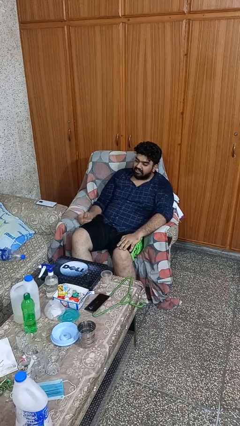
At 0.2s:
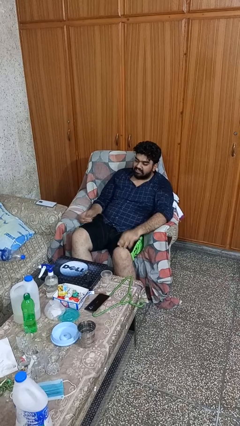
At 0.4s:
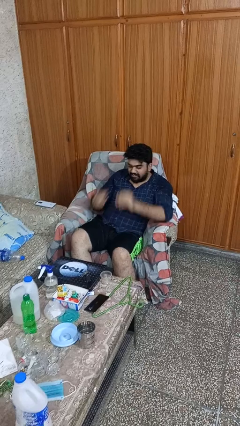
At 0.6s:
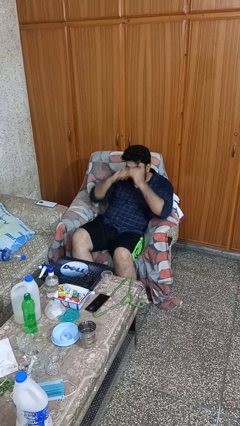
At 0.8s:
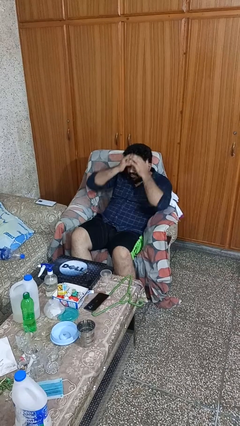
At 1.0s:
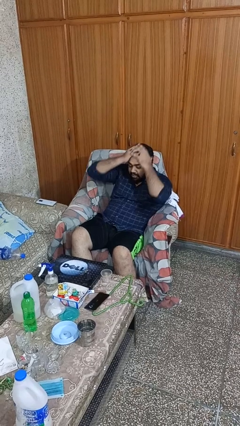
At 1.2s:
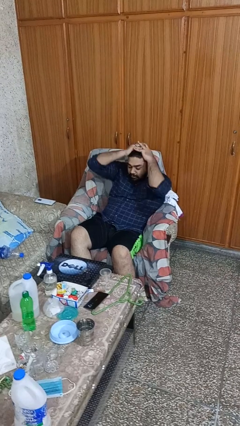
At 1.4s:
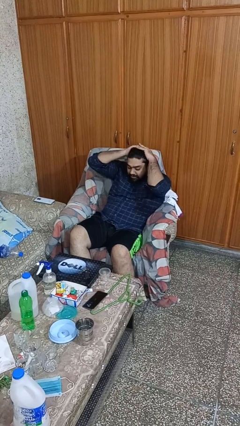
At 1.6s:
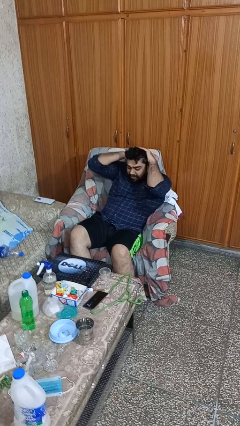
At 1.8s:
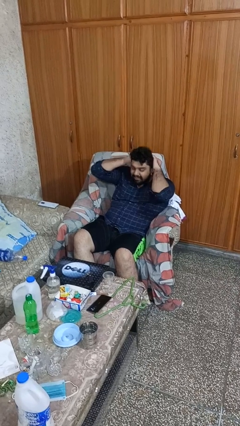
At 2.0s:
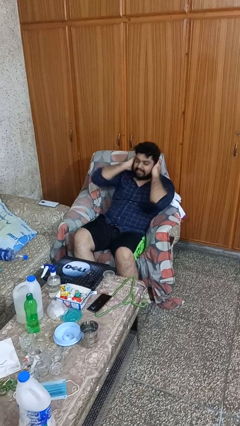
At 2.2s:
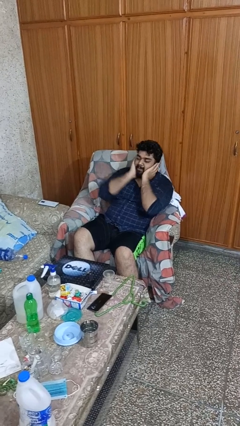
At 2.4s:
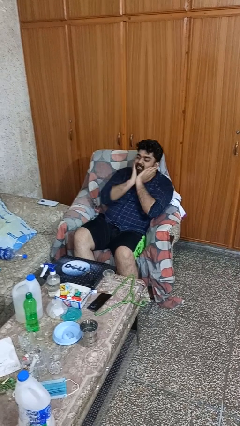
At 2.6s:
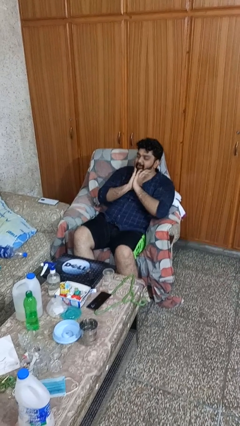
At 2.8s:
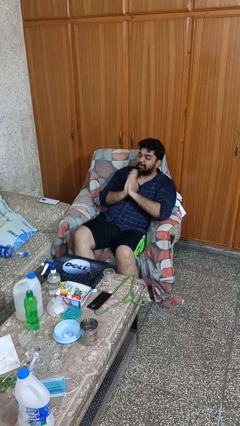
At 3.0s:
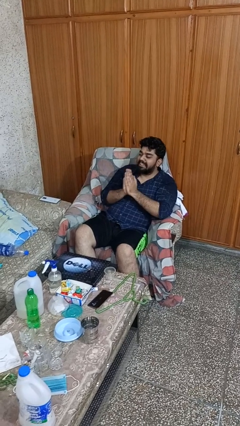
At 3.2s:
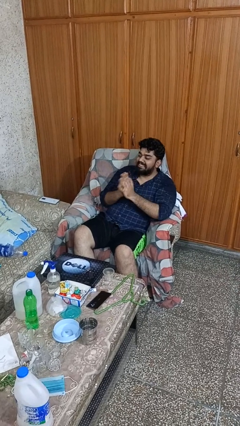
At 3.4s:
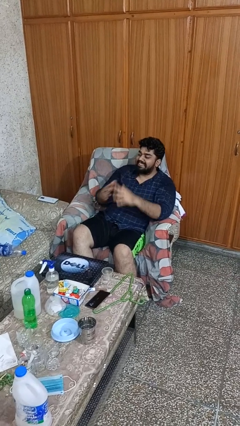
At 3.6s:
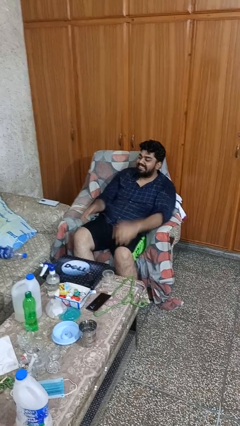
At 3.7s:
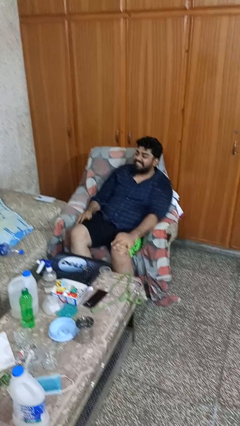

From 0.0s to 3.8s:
person scratches face

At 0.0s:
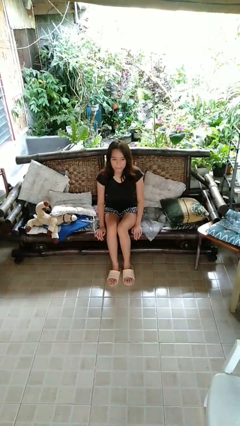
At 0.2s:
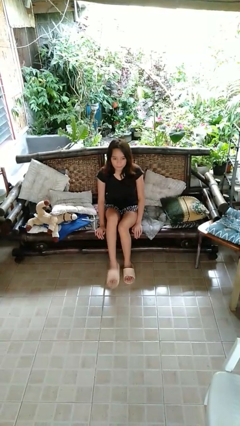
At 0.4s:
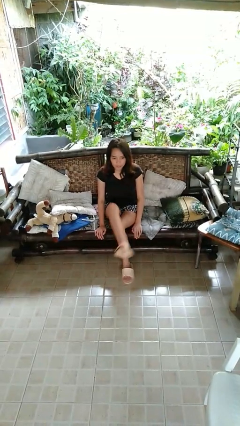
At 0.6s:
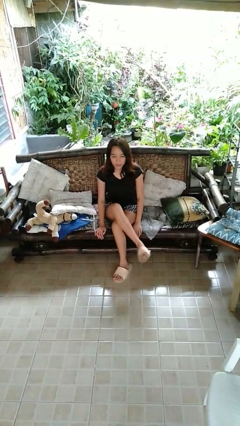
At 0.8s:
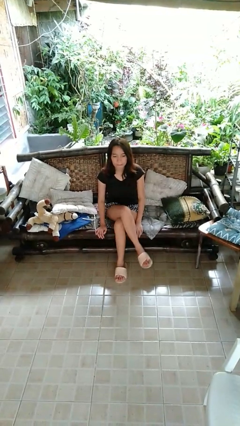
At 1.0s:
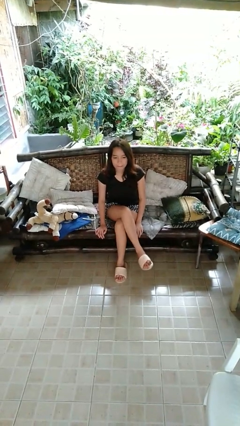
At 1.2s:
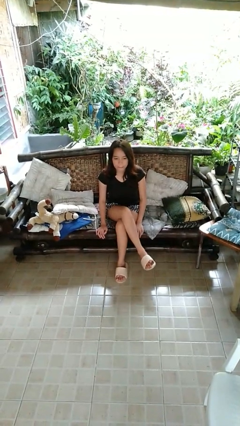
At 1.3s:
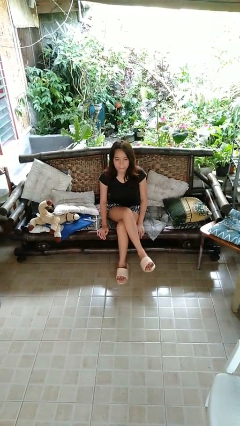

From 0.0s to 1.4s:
person crosses legs

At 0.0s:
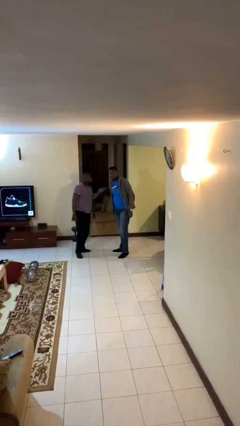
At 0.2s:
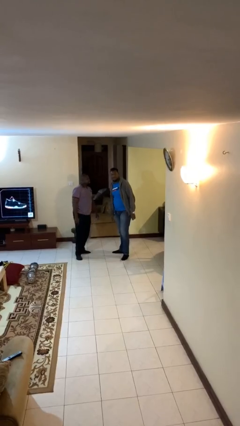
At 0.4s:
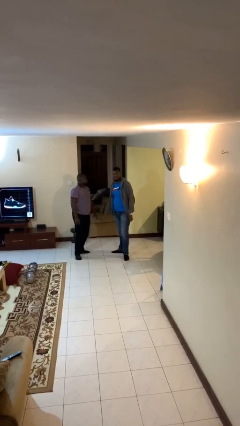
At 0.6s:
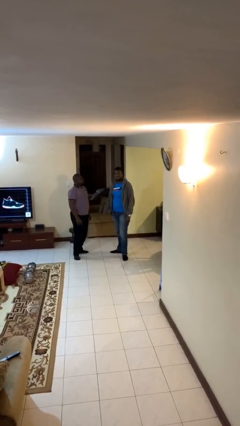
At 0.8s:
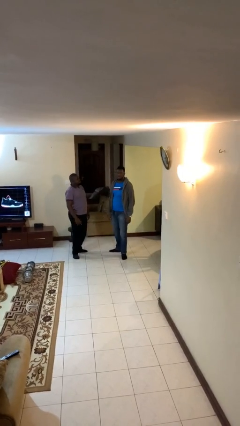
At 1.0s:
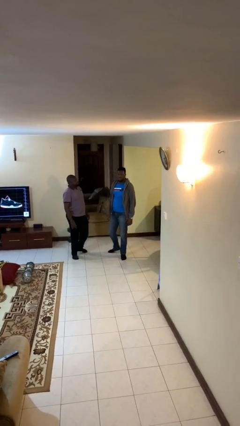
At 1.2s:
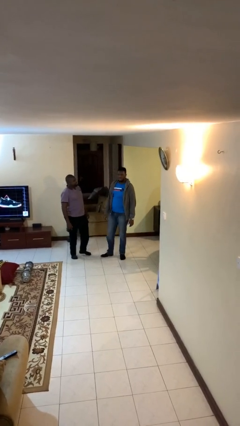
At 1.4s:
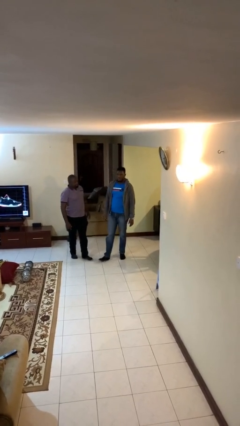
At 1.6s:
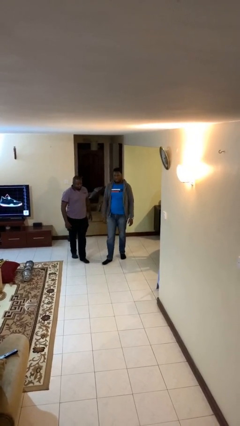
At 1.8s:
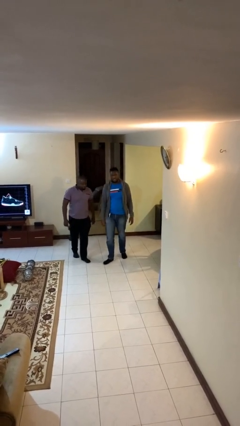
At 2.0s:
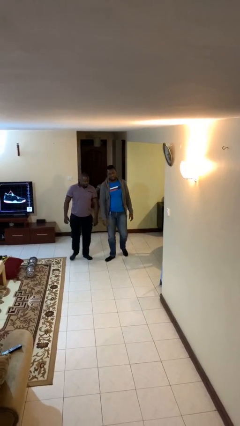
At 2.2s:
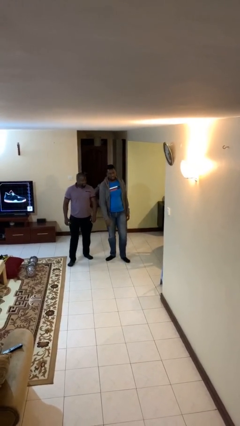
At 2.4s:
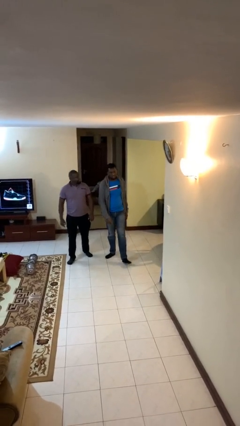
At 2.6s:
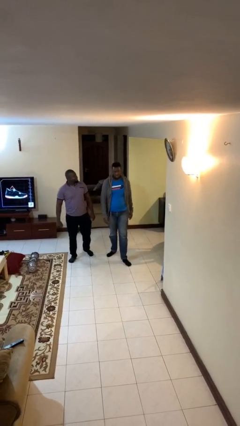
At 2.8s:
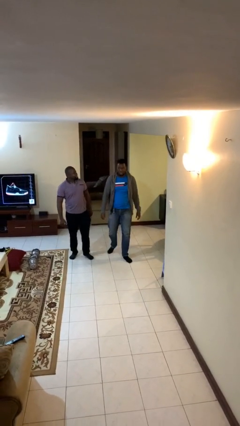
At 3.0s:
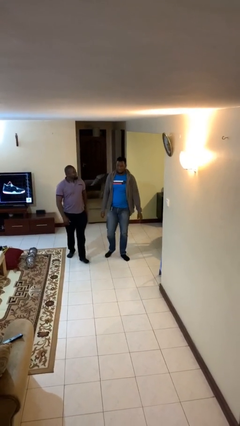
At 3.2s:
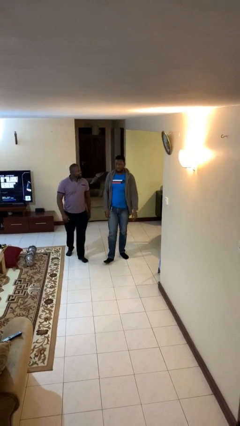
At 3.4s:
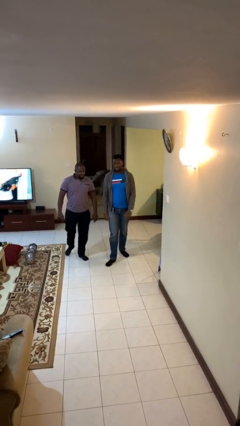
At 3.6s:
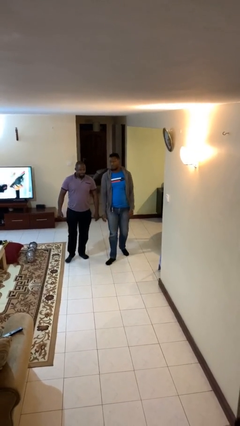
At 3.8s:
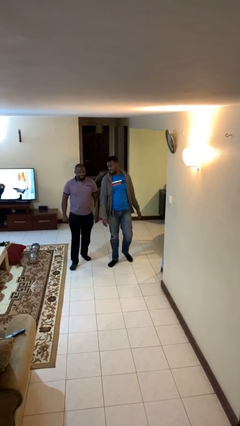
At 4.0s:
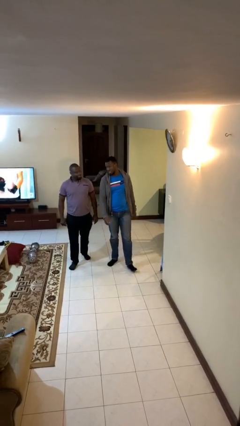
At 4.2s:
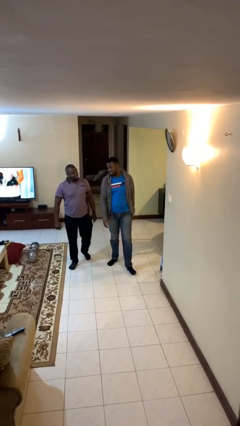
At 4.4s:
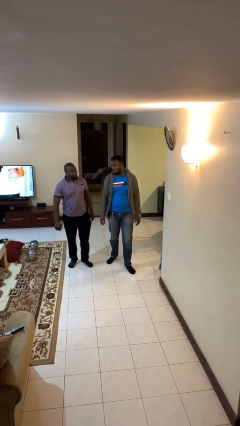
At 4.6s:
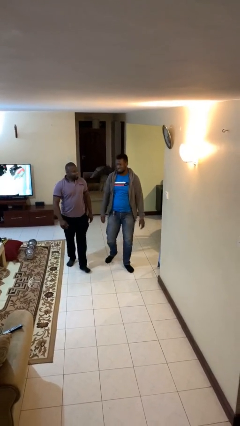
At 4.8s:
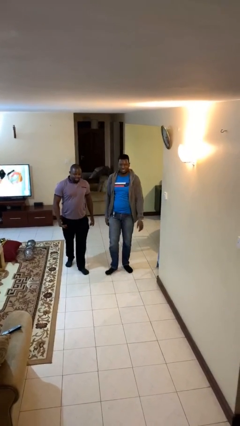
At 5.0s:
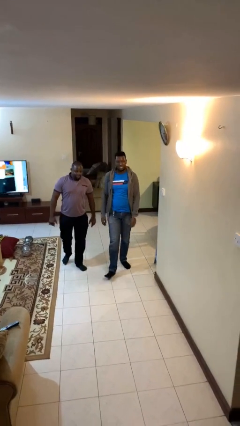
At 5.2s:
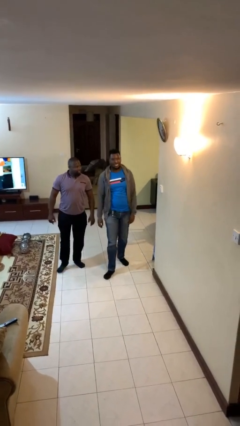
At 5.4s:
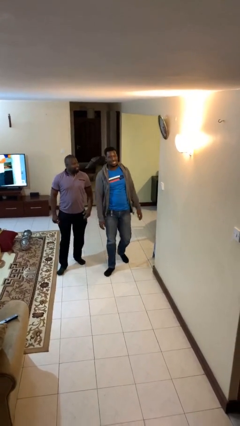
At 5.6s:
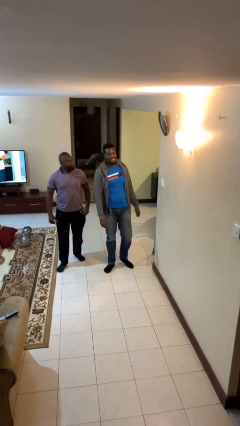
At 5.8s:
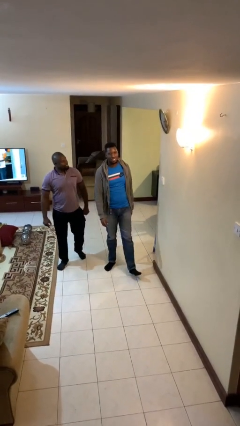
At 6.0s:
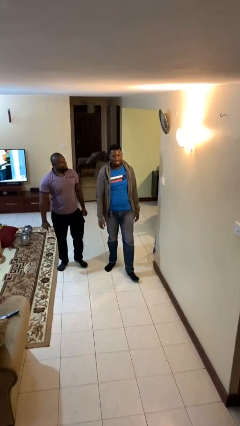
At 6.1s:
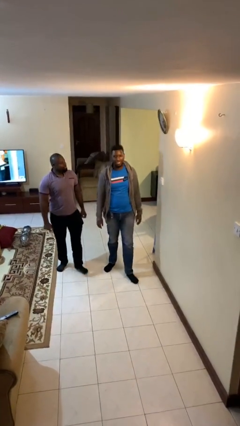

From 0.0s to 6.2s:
person talks to person

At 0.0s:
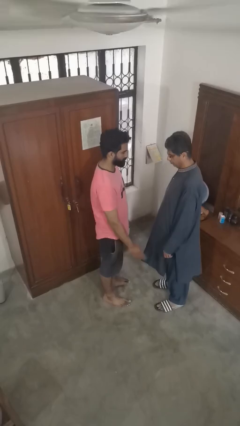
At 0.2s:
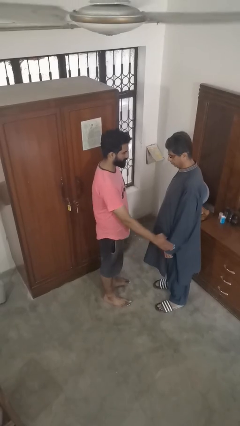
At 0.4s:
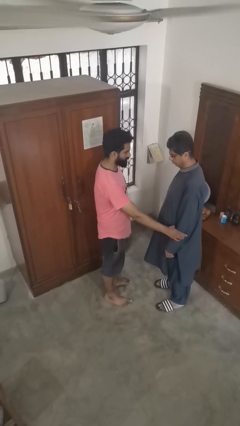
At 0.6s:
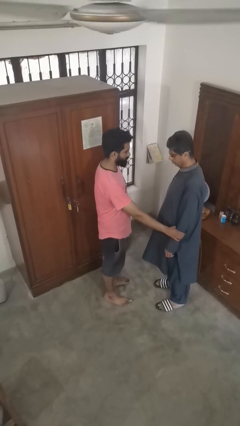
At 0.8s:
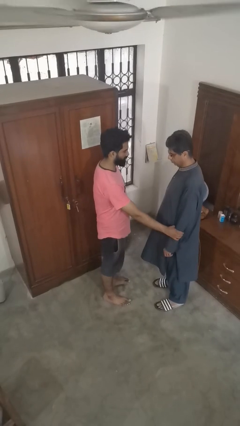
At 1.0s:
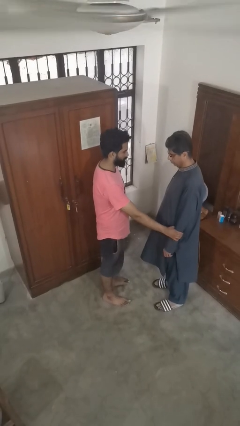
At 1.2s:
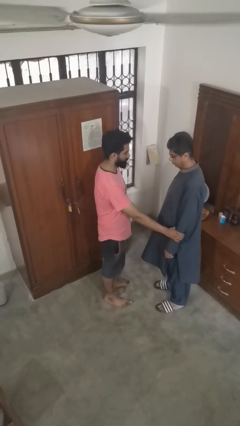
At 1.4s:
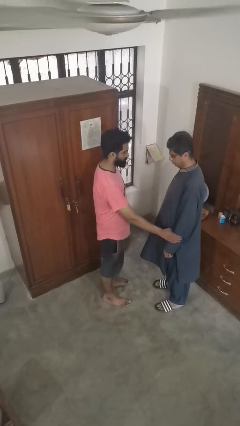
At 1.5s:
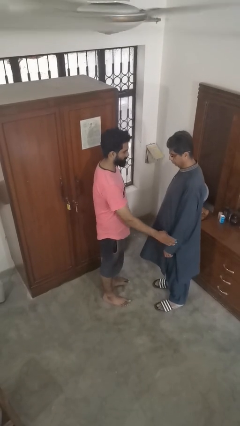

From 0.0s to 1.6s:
person grabs person by forearm

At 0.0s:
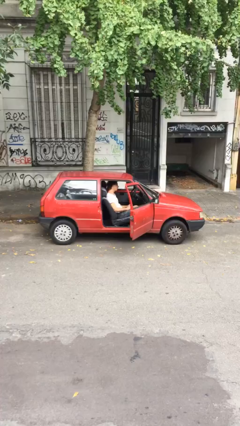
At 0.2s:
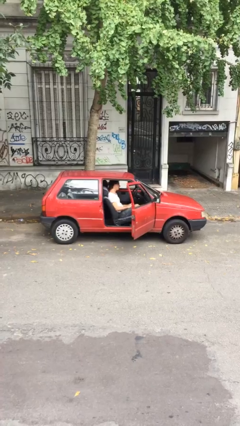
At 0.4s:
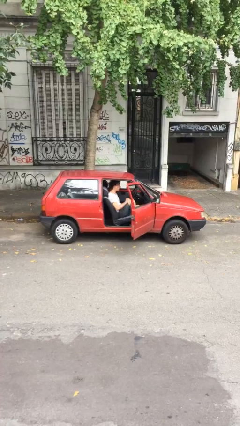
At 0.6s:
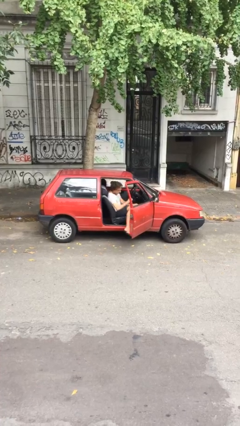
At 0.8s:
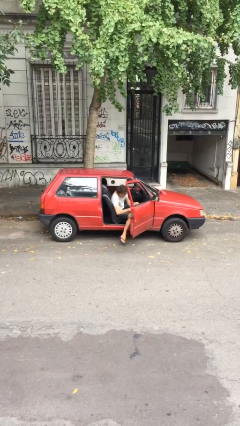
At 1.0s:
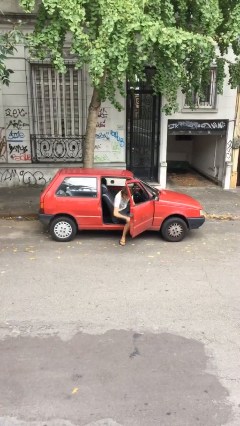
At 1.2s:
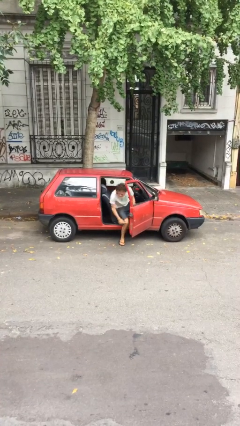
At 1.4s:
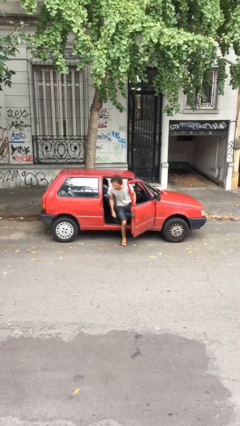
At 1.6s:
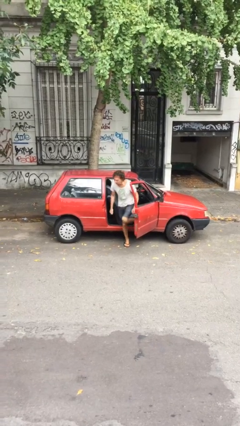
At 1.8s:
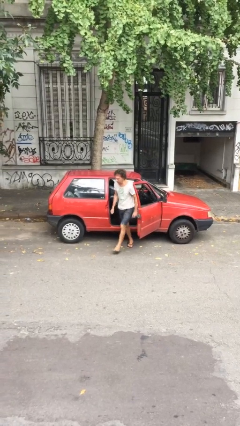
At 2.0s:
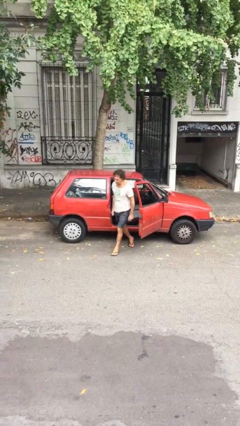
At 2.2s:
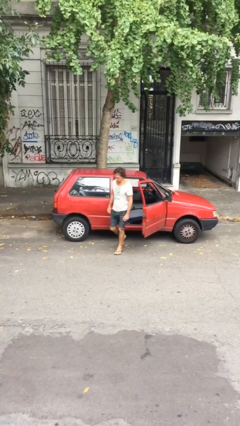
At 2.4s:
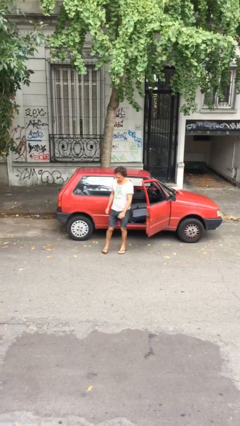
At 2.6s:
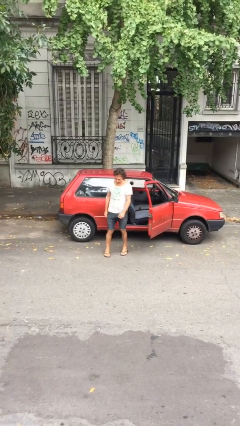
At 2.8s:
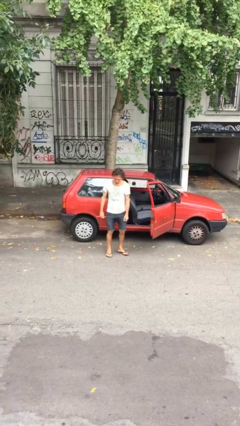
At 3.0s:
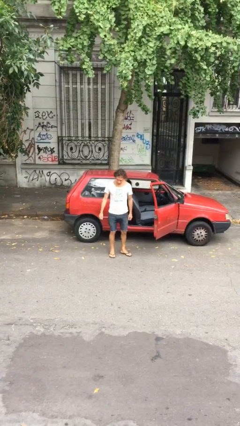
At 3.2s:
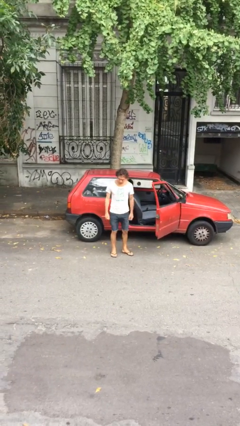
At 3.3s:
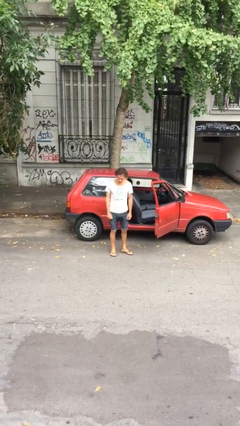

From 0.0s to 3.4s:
person exits car

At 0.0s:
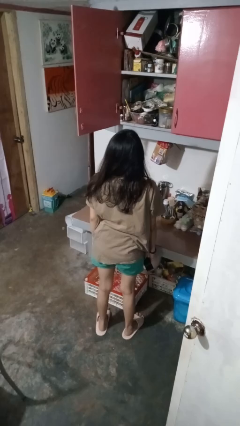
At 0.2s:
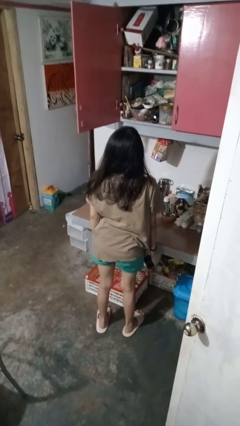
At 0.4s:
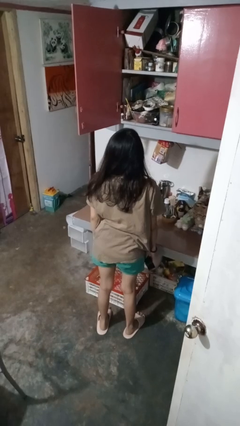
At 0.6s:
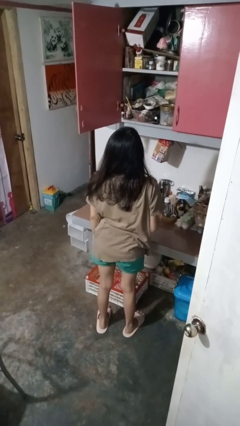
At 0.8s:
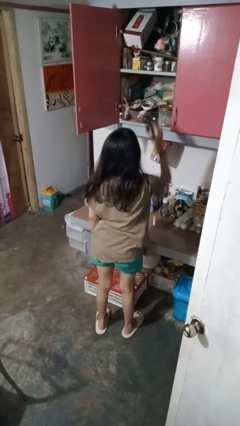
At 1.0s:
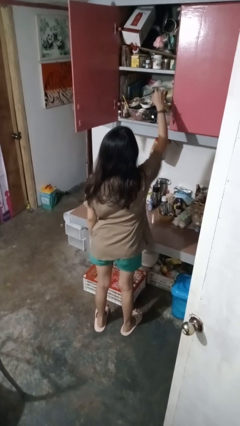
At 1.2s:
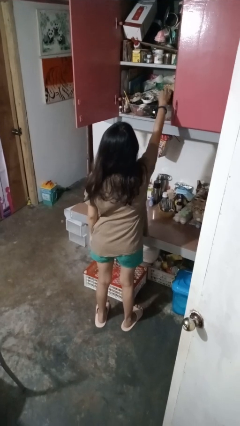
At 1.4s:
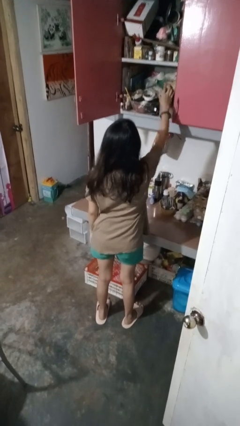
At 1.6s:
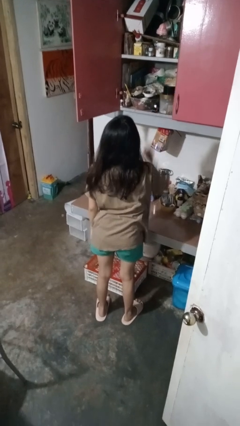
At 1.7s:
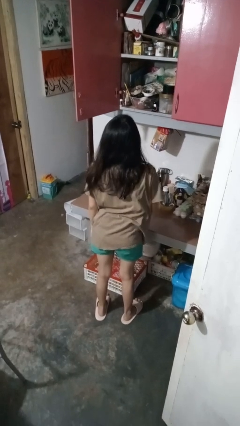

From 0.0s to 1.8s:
person puts object in cabinet
